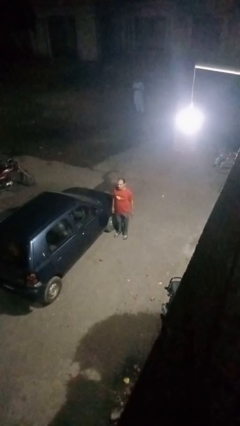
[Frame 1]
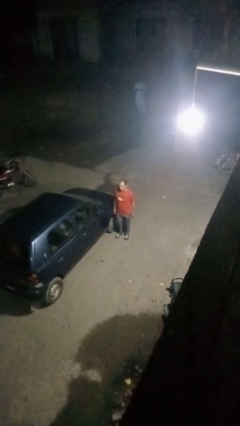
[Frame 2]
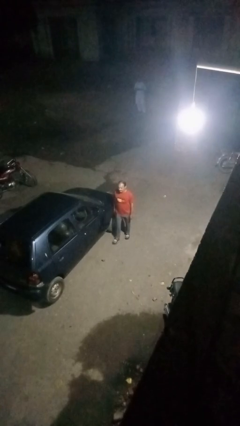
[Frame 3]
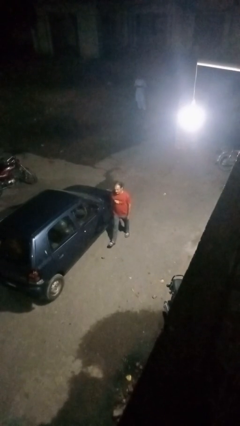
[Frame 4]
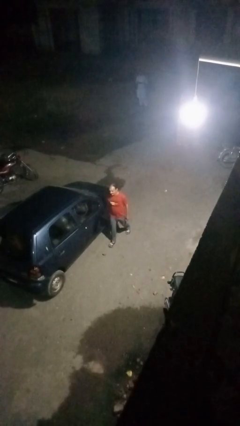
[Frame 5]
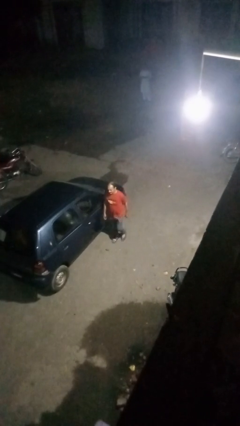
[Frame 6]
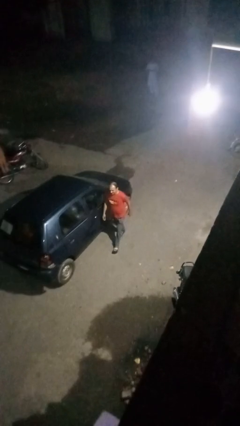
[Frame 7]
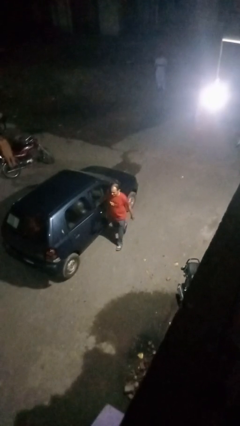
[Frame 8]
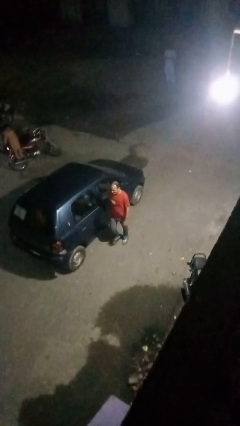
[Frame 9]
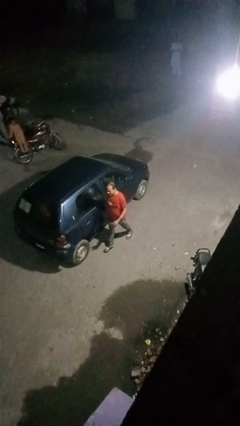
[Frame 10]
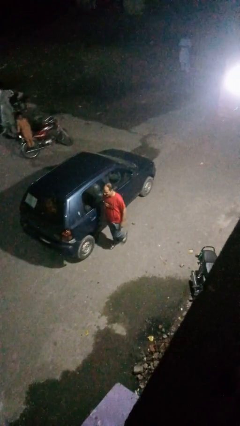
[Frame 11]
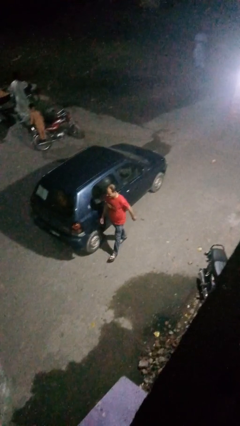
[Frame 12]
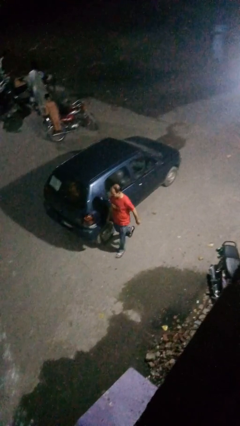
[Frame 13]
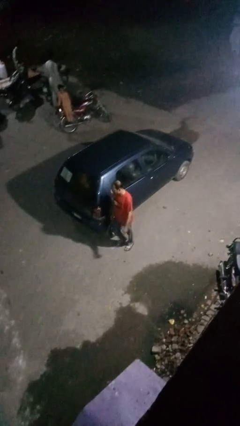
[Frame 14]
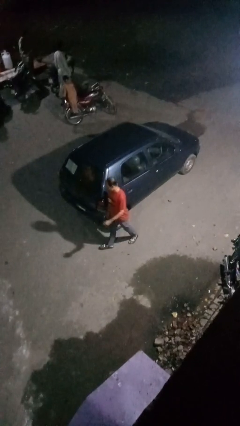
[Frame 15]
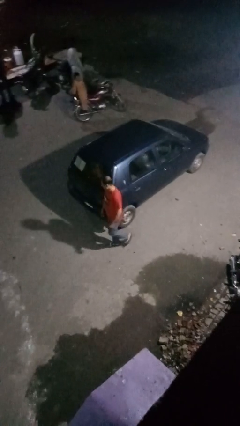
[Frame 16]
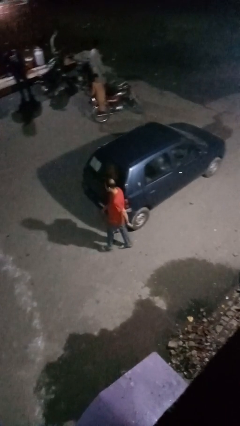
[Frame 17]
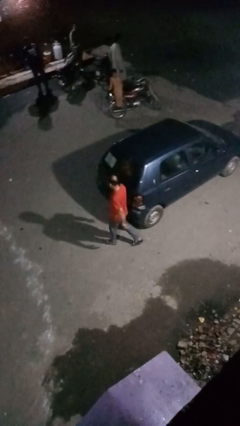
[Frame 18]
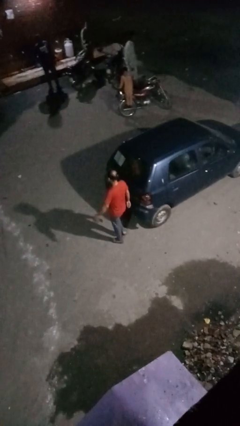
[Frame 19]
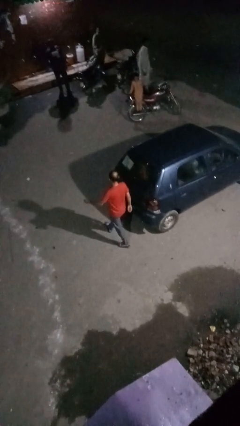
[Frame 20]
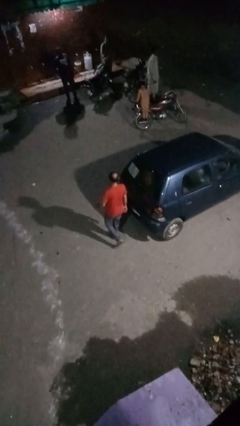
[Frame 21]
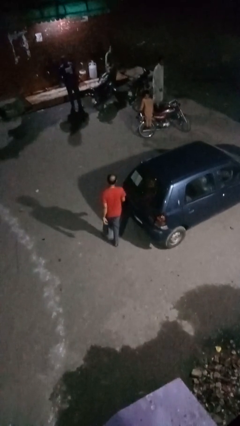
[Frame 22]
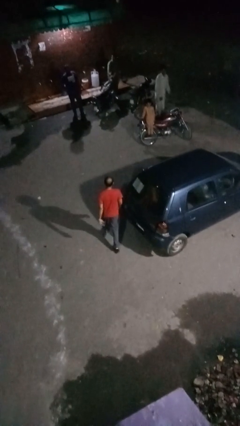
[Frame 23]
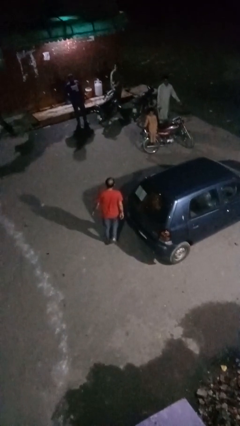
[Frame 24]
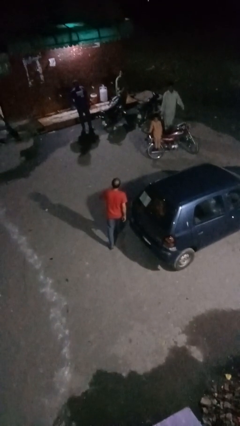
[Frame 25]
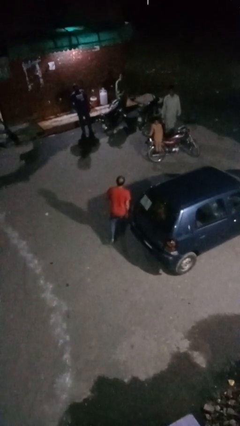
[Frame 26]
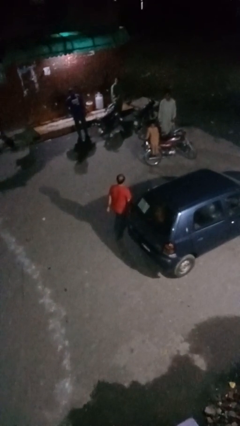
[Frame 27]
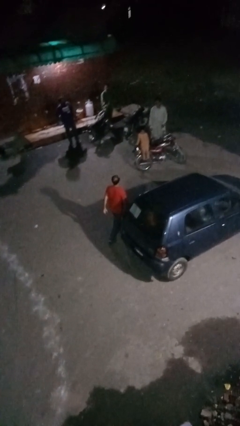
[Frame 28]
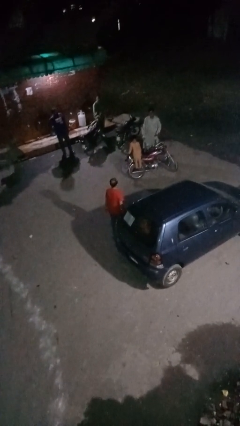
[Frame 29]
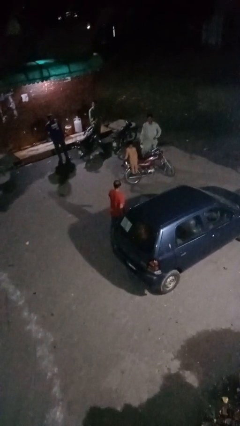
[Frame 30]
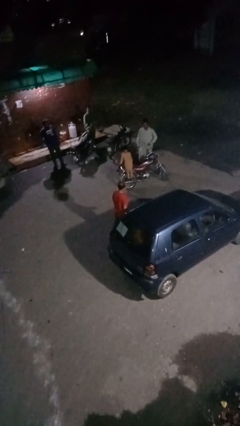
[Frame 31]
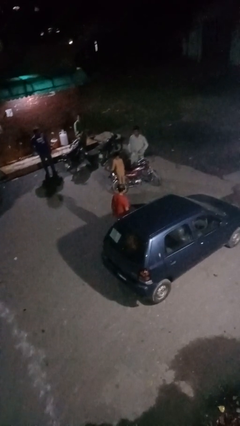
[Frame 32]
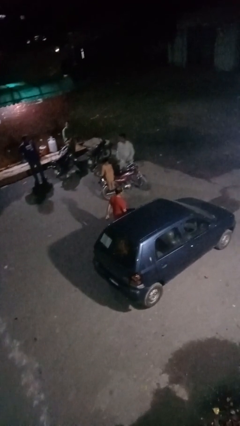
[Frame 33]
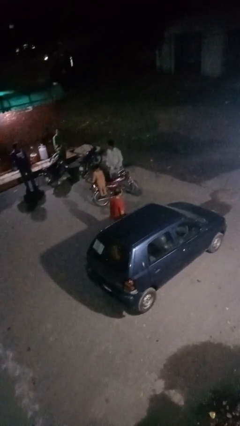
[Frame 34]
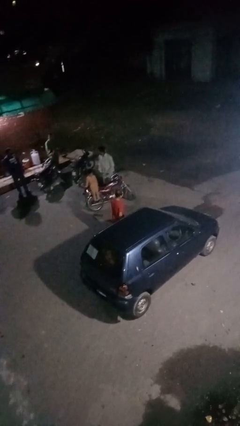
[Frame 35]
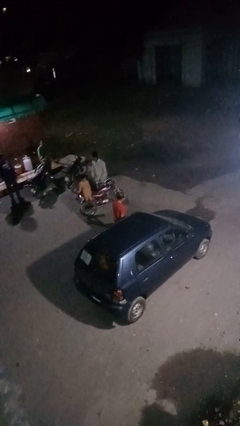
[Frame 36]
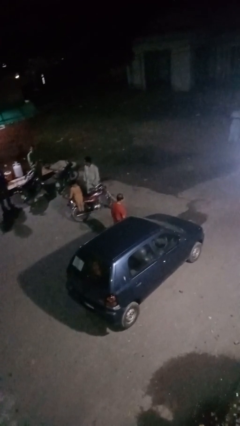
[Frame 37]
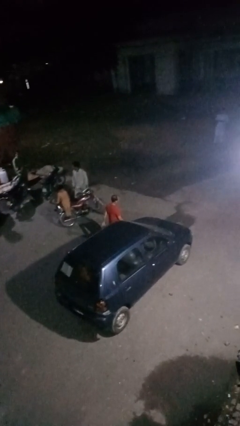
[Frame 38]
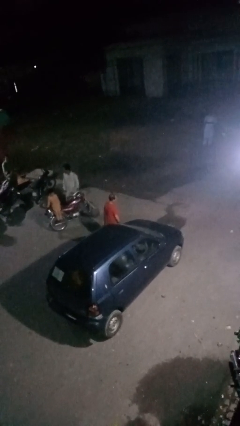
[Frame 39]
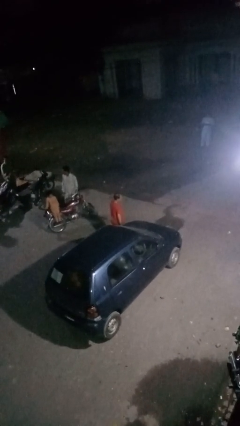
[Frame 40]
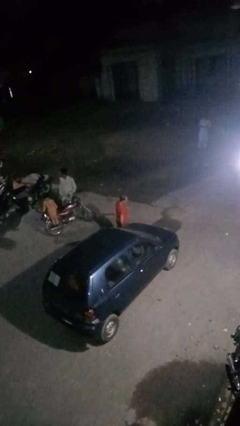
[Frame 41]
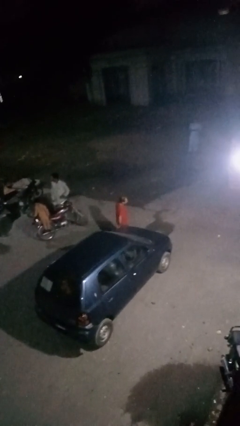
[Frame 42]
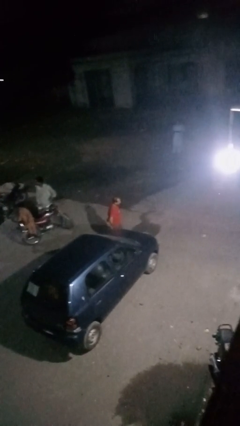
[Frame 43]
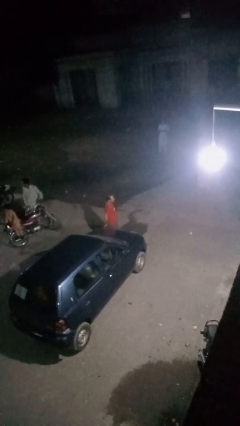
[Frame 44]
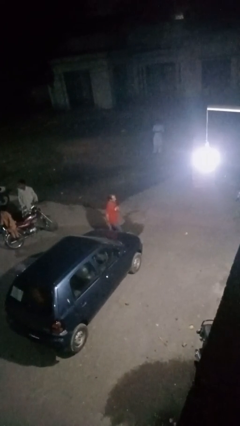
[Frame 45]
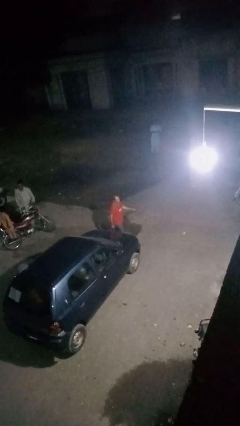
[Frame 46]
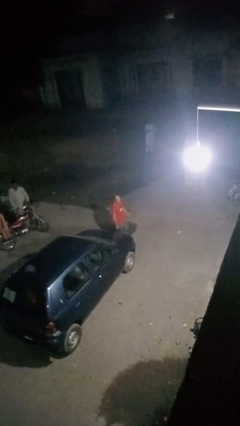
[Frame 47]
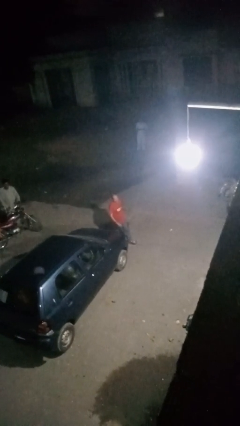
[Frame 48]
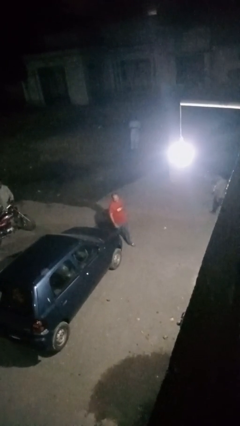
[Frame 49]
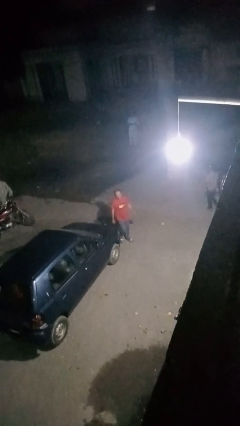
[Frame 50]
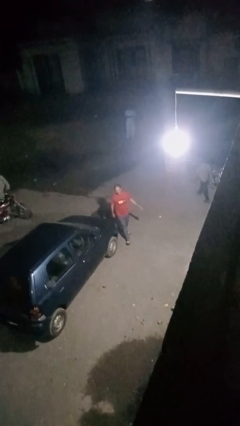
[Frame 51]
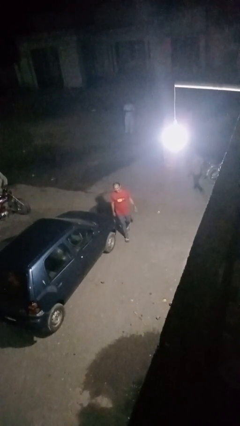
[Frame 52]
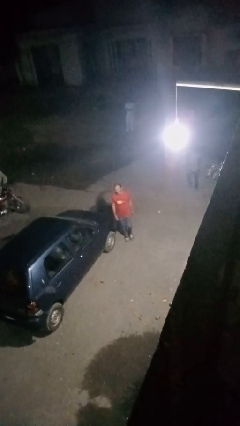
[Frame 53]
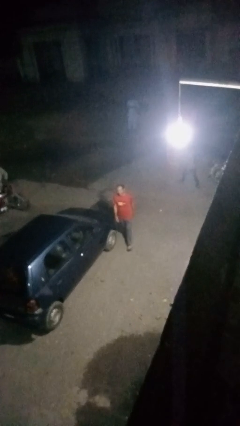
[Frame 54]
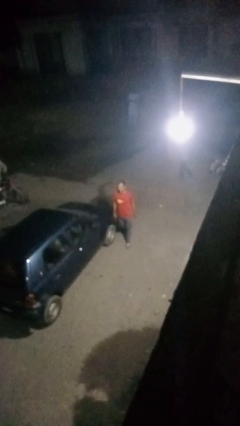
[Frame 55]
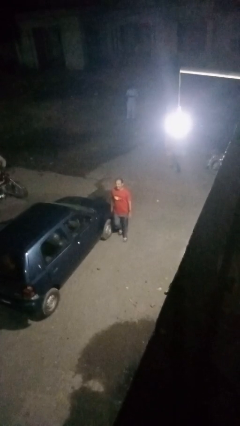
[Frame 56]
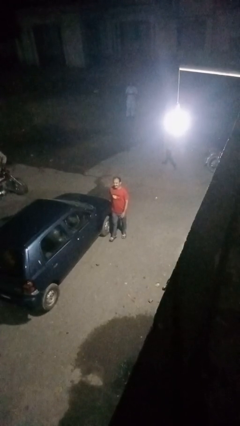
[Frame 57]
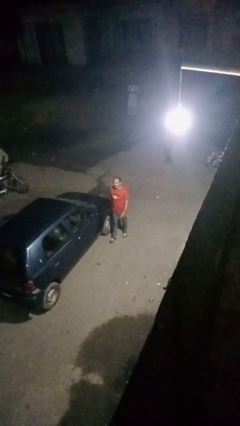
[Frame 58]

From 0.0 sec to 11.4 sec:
person walks around car

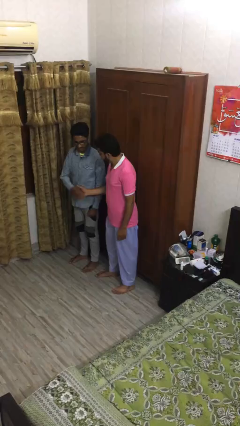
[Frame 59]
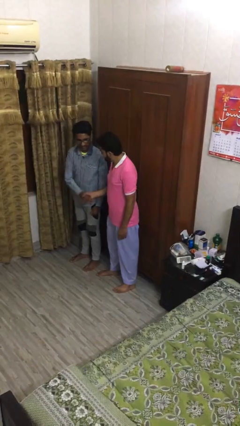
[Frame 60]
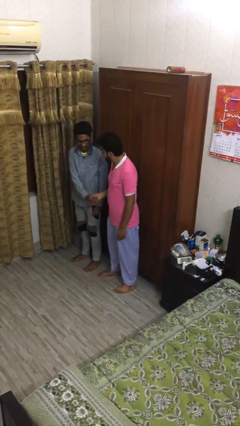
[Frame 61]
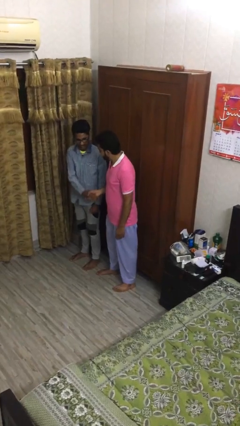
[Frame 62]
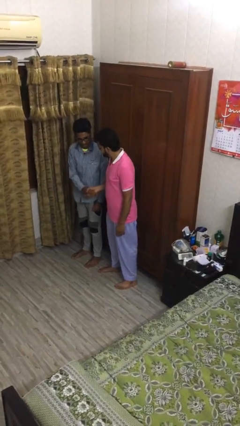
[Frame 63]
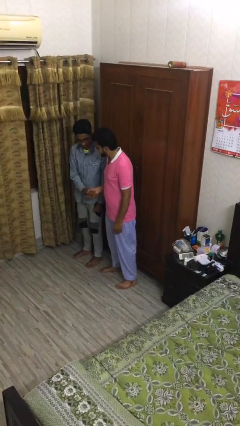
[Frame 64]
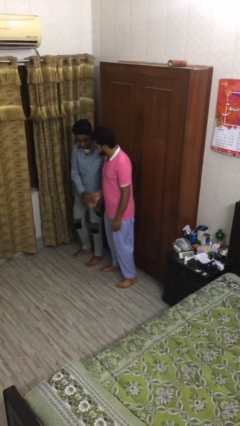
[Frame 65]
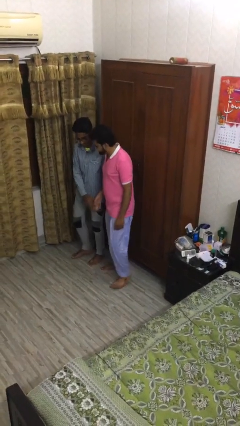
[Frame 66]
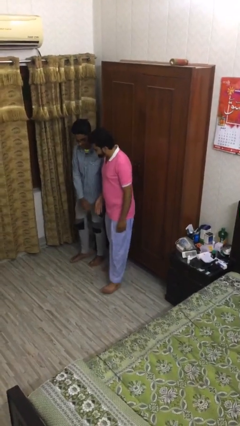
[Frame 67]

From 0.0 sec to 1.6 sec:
person shakes hand

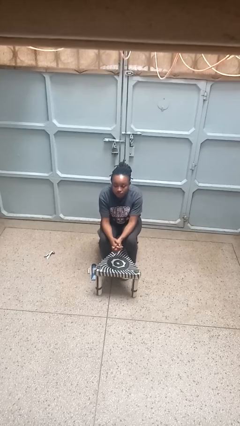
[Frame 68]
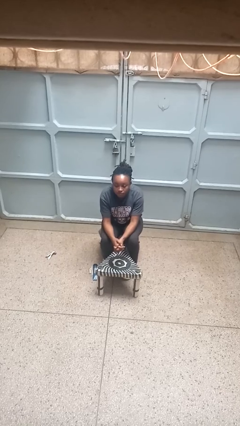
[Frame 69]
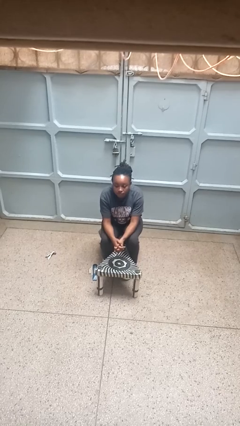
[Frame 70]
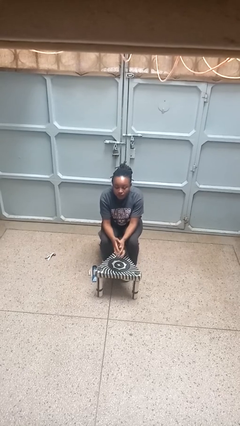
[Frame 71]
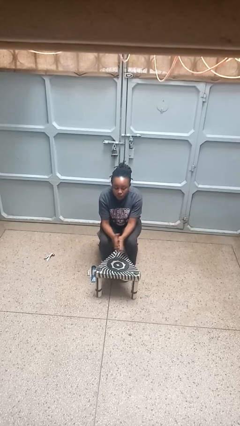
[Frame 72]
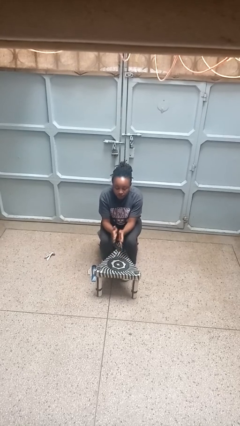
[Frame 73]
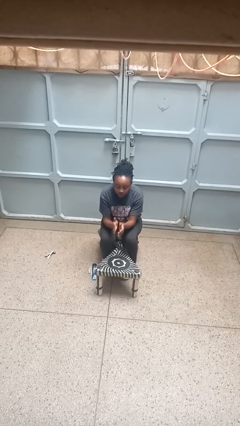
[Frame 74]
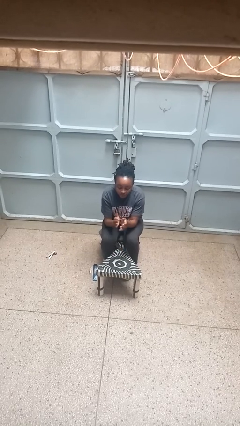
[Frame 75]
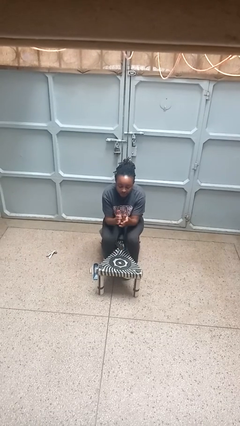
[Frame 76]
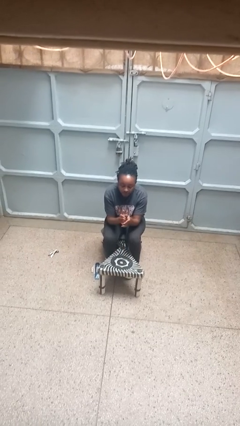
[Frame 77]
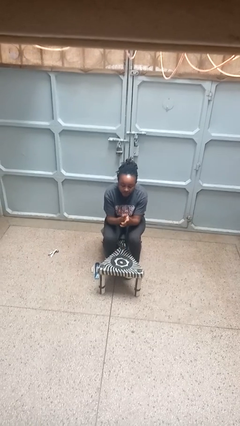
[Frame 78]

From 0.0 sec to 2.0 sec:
person claps hands

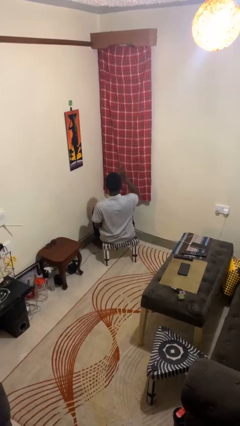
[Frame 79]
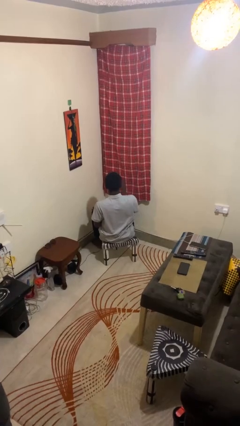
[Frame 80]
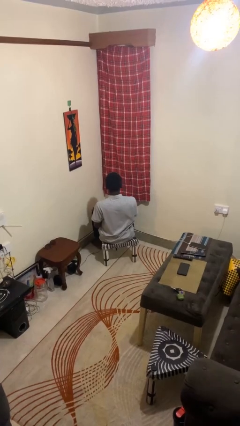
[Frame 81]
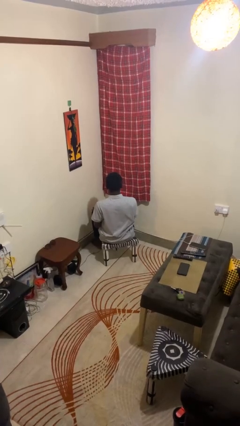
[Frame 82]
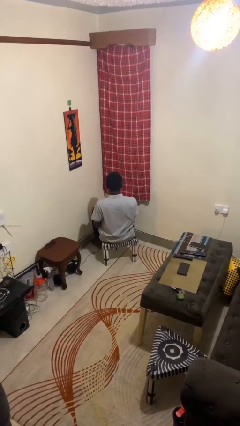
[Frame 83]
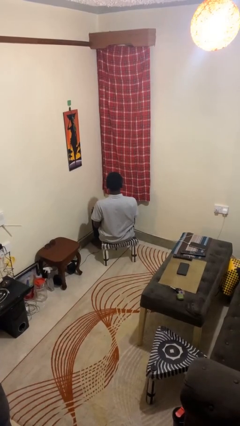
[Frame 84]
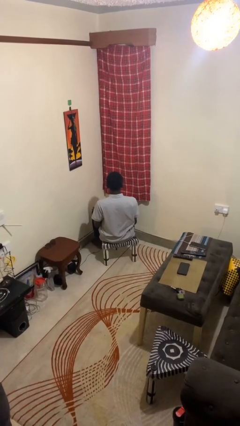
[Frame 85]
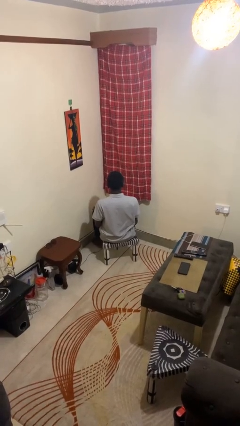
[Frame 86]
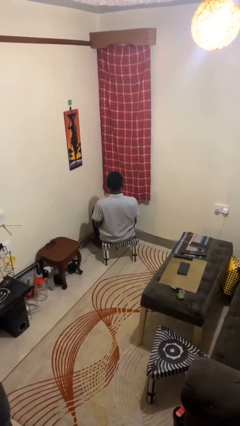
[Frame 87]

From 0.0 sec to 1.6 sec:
person gestures lower hand

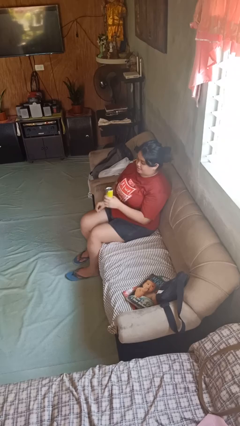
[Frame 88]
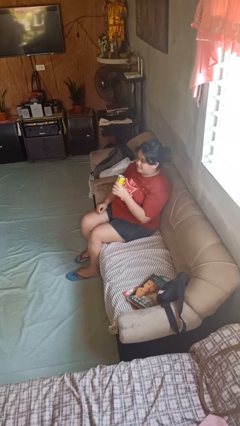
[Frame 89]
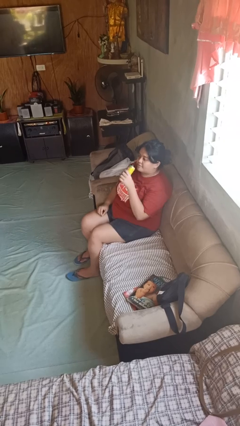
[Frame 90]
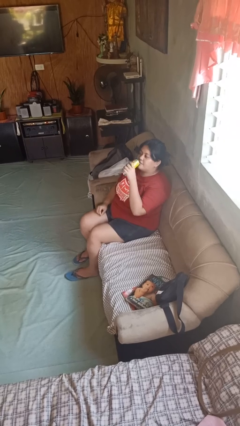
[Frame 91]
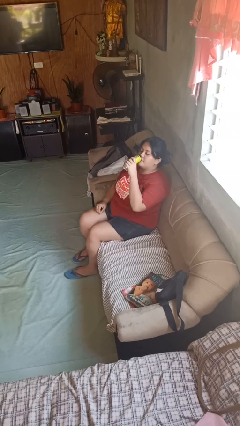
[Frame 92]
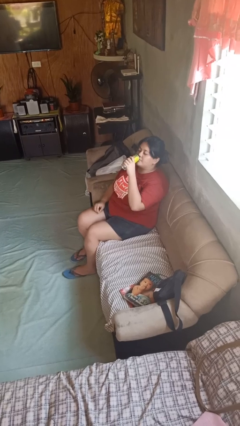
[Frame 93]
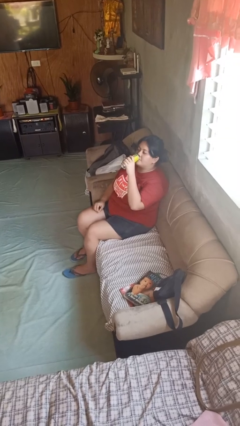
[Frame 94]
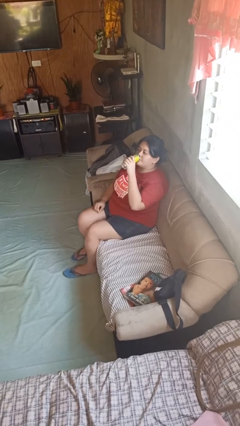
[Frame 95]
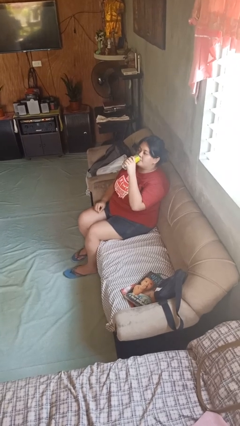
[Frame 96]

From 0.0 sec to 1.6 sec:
person drinks from beverage can
